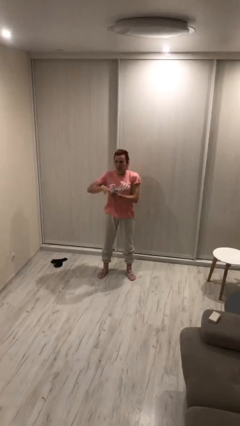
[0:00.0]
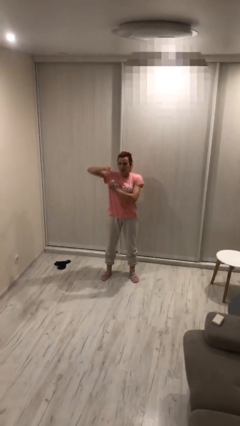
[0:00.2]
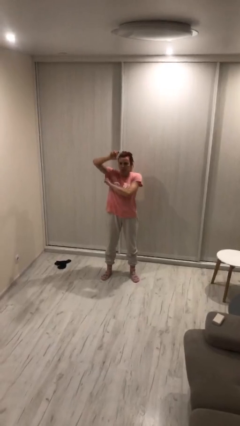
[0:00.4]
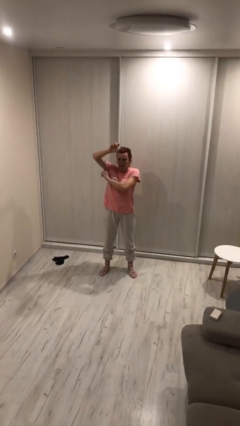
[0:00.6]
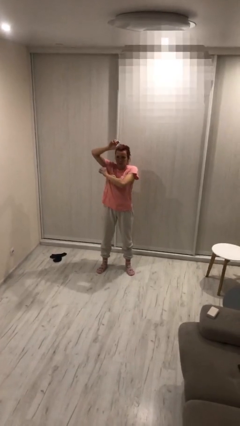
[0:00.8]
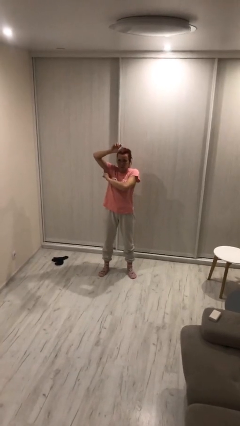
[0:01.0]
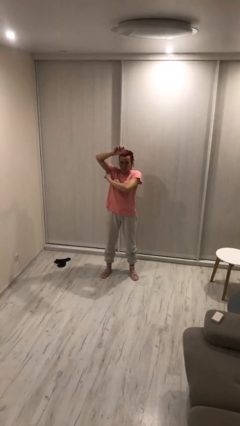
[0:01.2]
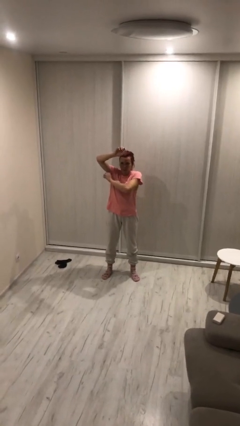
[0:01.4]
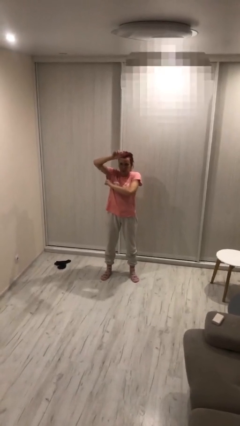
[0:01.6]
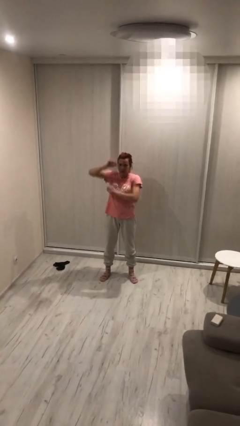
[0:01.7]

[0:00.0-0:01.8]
person applies deodorant

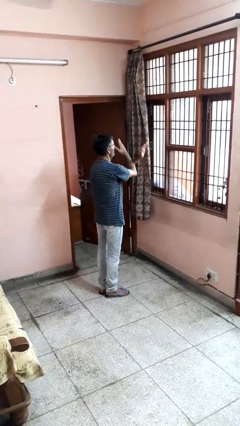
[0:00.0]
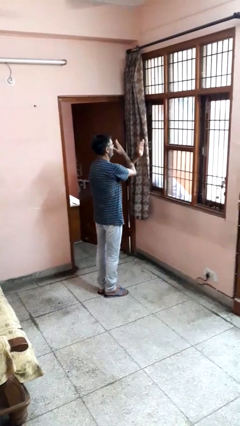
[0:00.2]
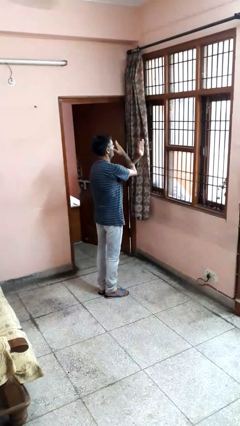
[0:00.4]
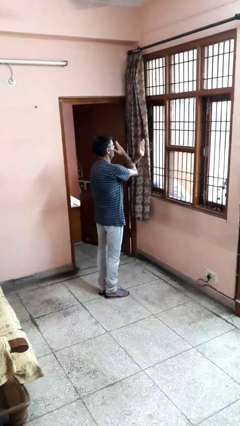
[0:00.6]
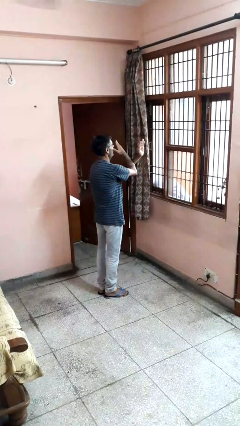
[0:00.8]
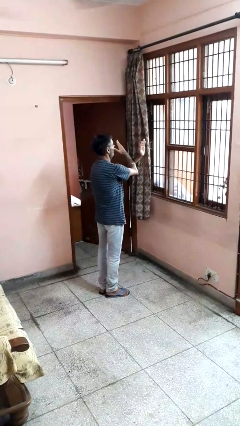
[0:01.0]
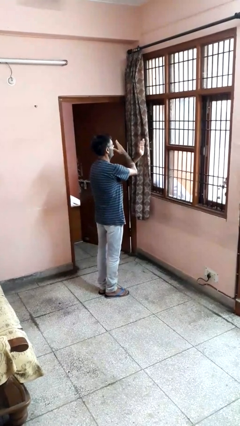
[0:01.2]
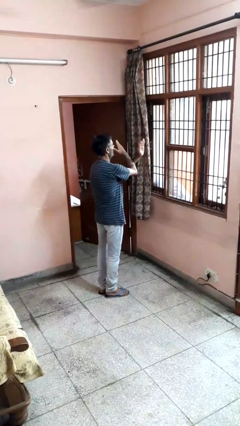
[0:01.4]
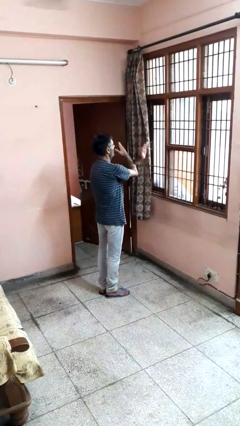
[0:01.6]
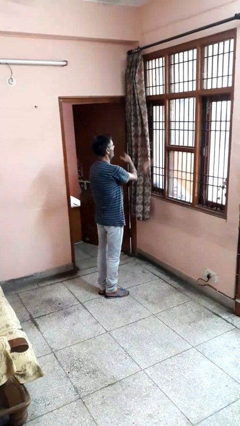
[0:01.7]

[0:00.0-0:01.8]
person gestures arms x

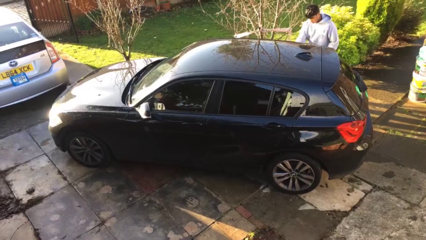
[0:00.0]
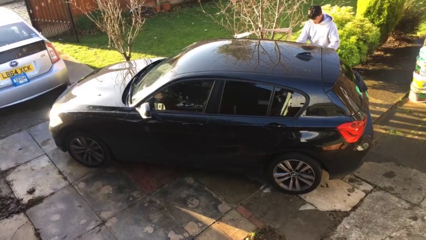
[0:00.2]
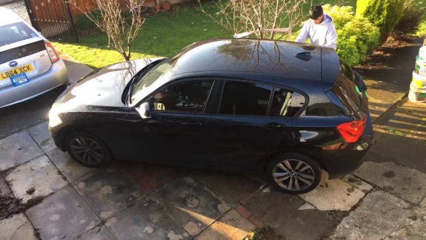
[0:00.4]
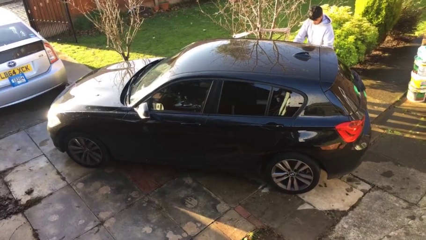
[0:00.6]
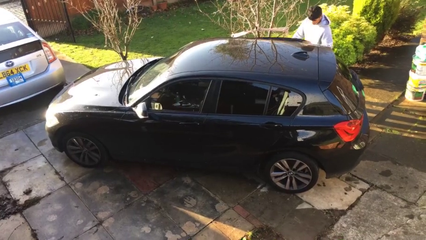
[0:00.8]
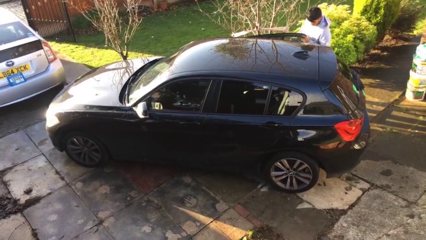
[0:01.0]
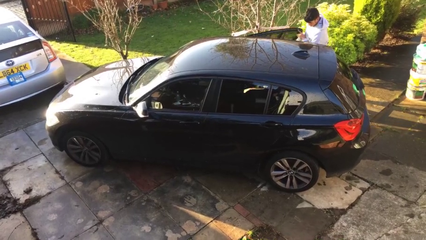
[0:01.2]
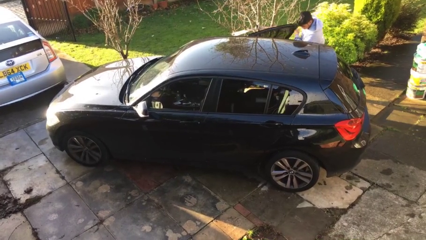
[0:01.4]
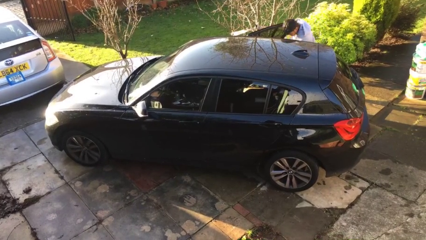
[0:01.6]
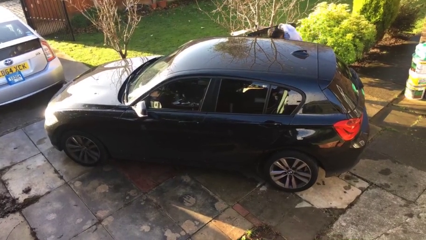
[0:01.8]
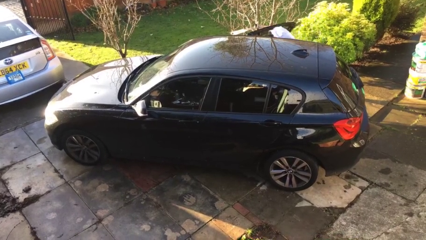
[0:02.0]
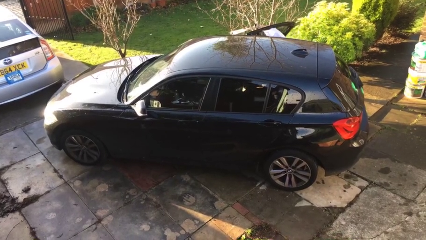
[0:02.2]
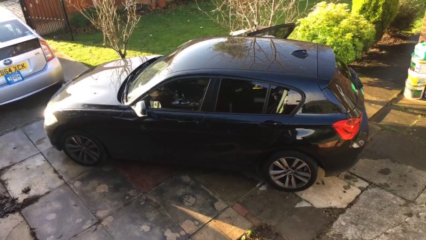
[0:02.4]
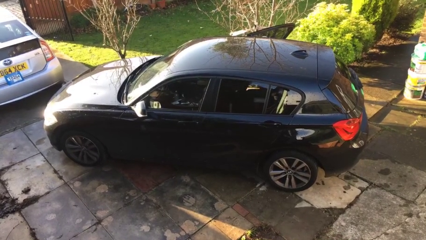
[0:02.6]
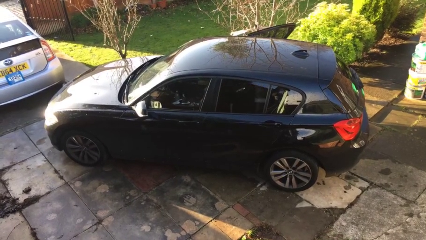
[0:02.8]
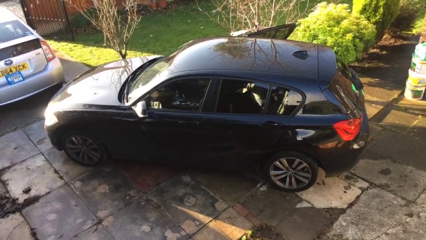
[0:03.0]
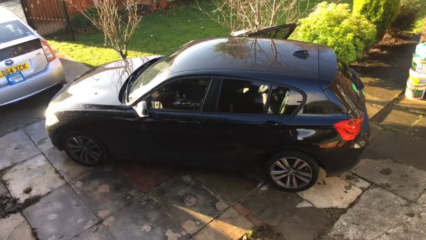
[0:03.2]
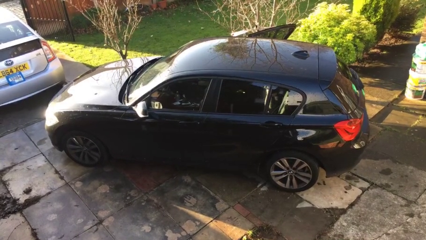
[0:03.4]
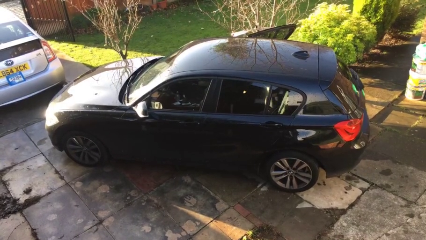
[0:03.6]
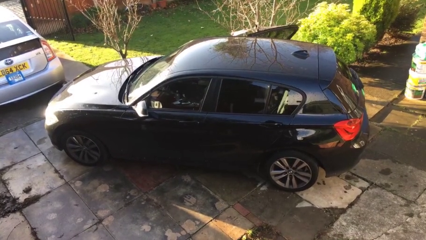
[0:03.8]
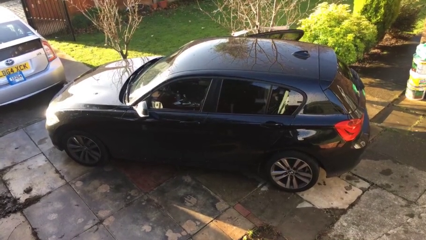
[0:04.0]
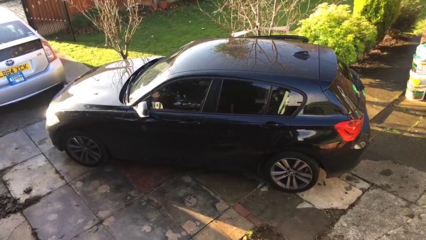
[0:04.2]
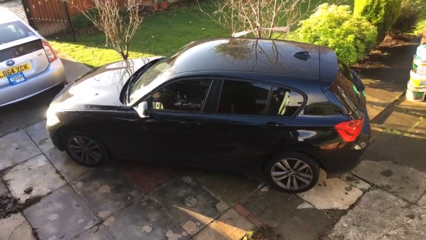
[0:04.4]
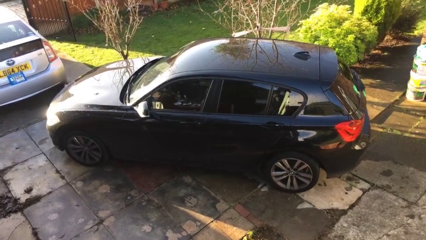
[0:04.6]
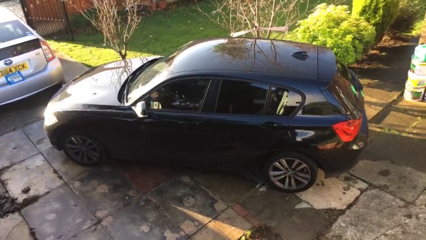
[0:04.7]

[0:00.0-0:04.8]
car picks up person

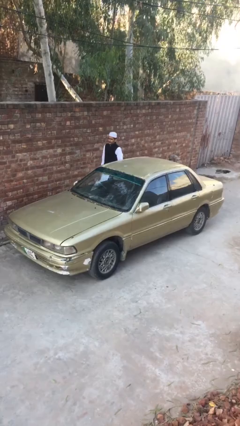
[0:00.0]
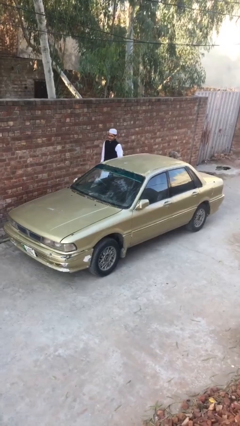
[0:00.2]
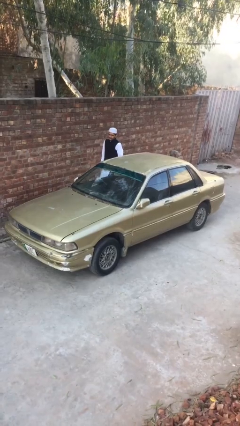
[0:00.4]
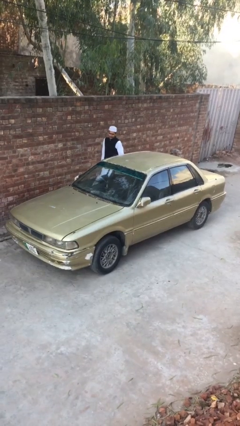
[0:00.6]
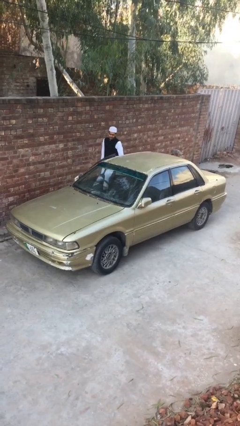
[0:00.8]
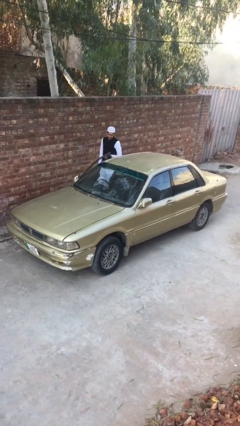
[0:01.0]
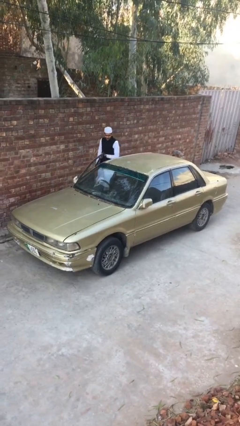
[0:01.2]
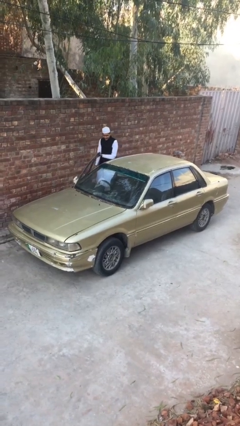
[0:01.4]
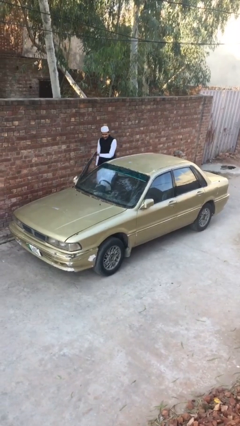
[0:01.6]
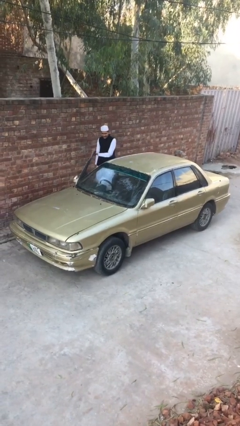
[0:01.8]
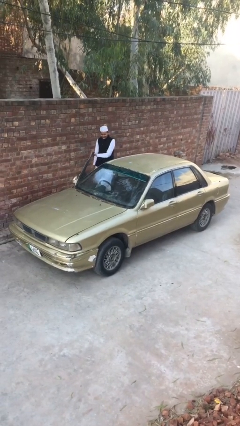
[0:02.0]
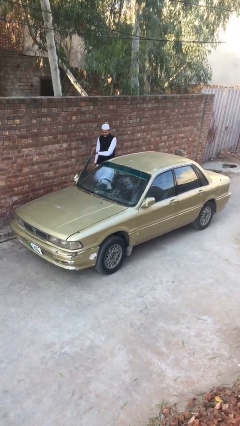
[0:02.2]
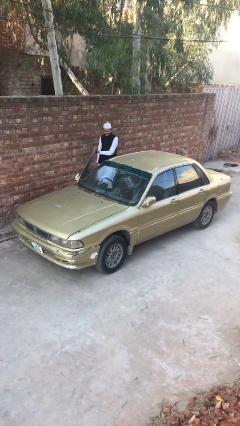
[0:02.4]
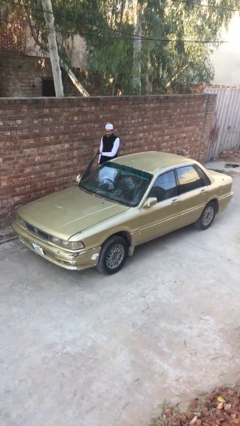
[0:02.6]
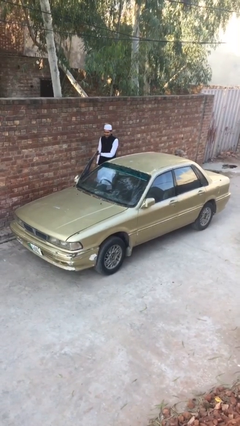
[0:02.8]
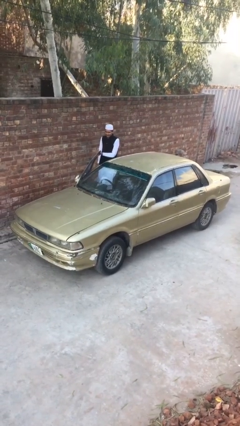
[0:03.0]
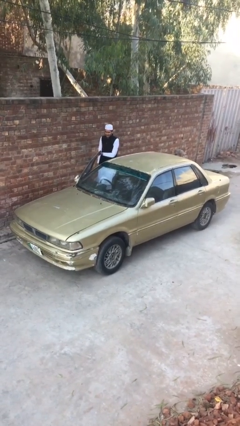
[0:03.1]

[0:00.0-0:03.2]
person opens car door

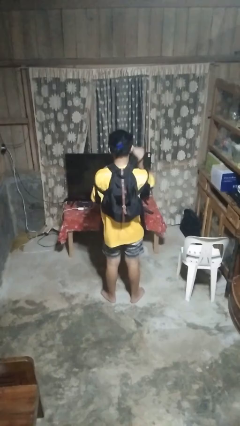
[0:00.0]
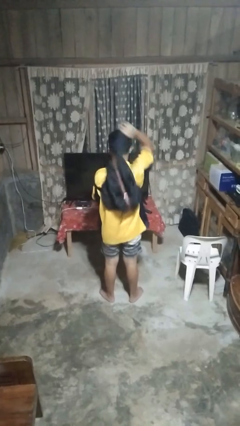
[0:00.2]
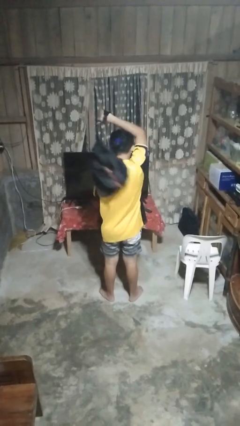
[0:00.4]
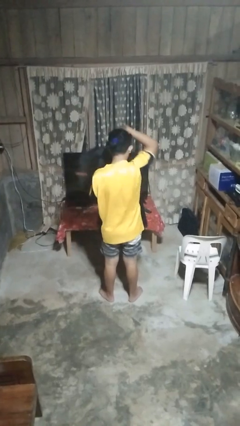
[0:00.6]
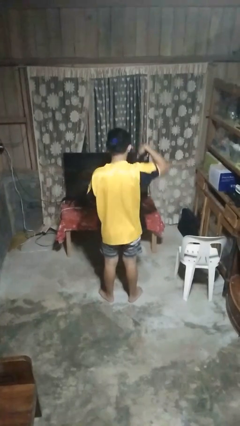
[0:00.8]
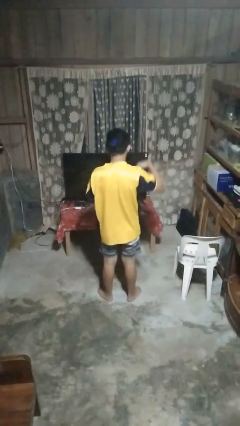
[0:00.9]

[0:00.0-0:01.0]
person takes off backpack

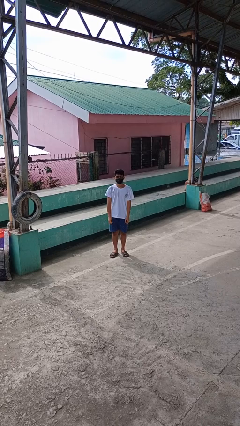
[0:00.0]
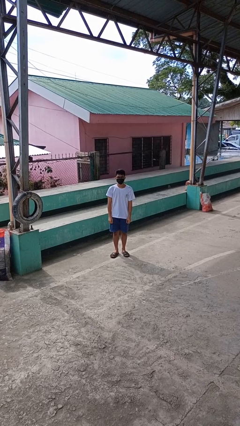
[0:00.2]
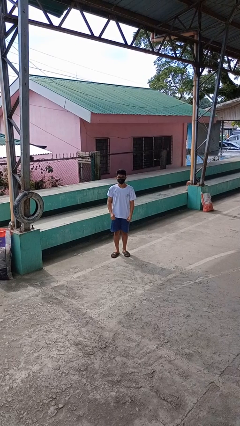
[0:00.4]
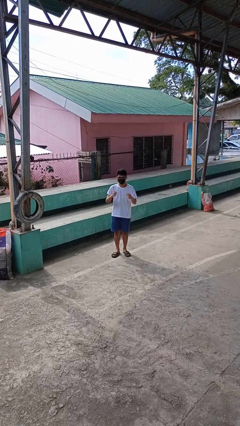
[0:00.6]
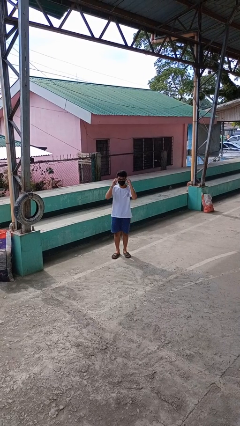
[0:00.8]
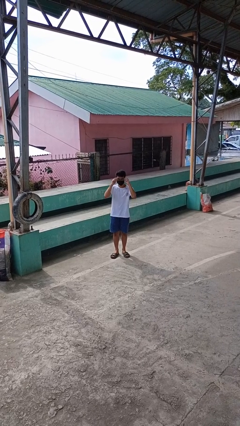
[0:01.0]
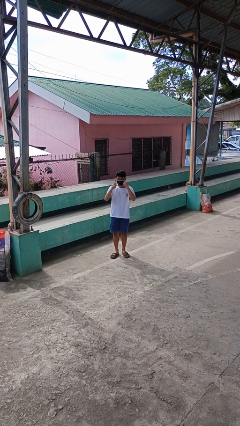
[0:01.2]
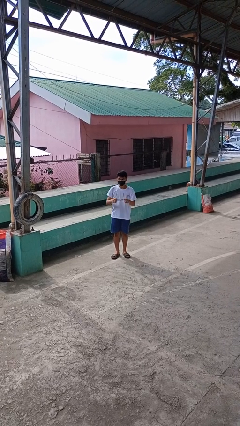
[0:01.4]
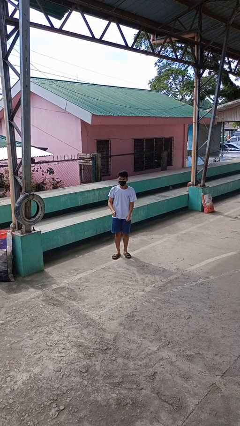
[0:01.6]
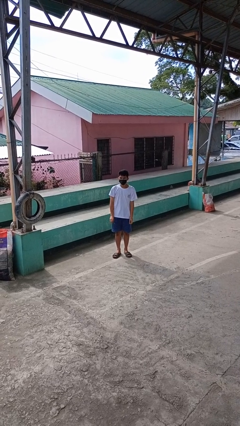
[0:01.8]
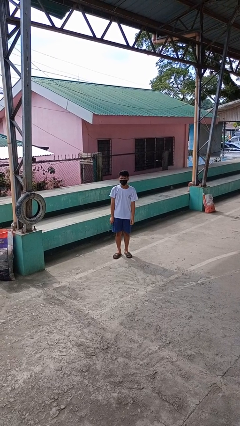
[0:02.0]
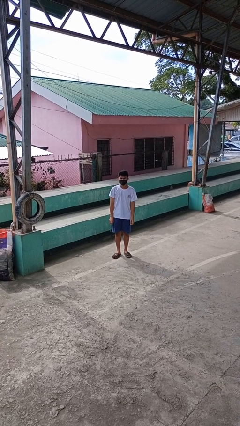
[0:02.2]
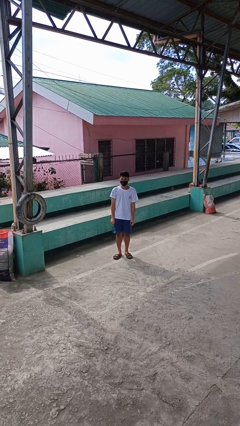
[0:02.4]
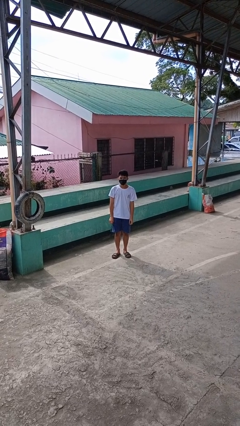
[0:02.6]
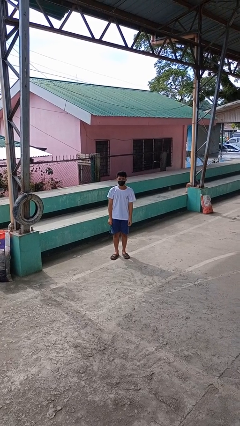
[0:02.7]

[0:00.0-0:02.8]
person takes off glasses

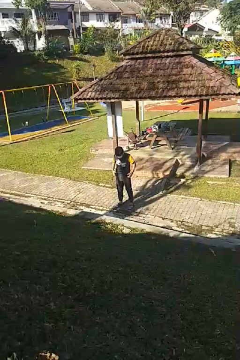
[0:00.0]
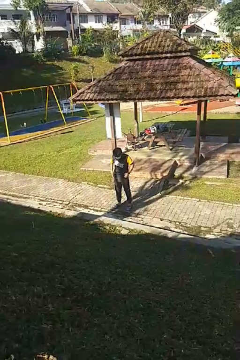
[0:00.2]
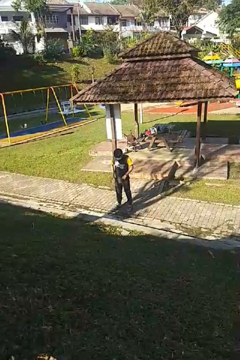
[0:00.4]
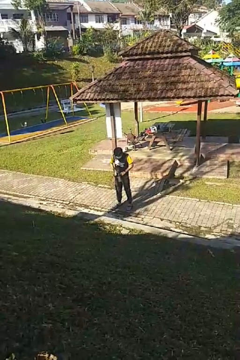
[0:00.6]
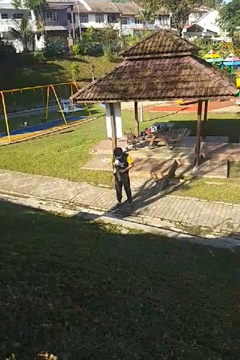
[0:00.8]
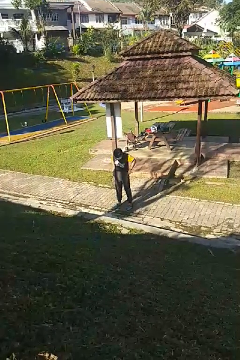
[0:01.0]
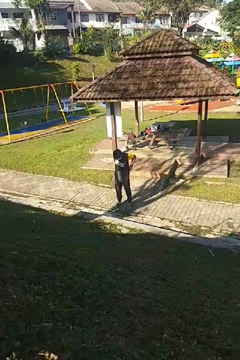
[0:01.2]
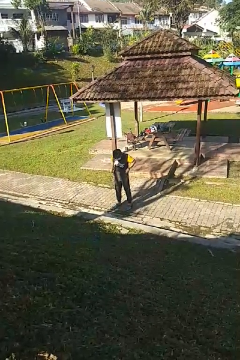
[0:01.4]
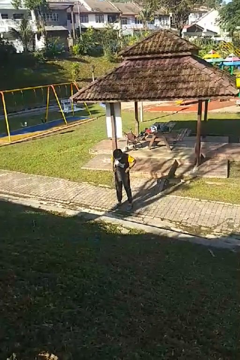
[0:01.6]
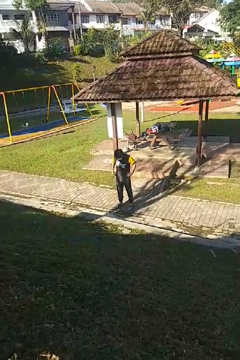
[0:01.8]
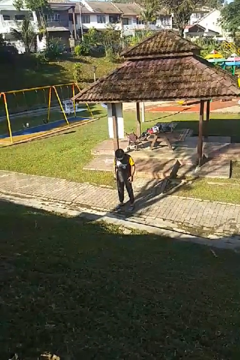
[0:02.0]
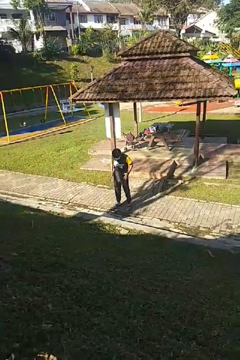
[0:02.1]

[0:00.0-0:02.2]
person hikes up pants

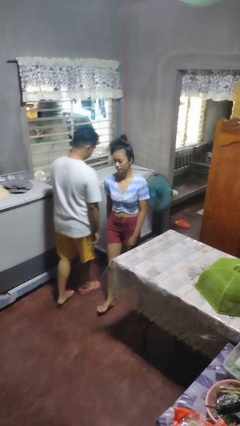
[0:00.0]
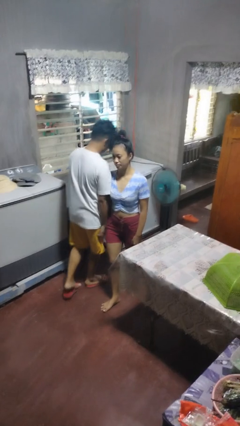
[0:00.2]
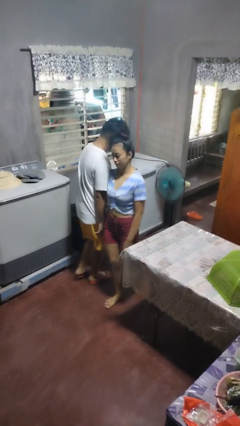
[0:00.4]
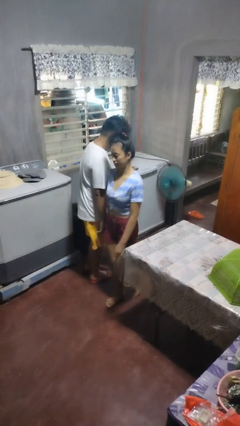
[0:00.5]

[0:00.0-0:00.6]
person bumps into person
